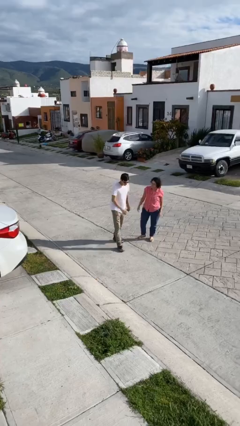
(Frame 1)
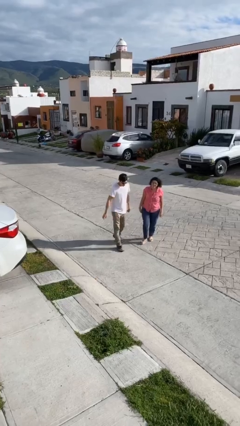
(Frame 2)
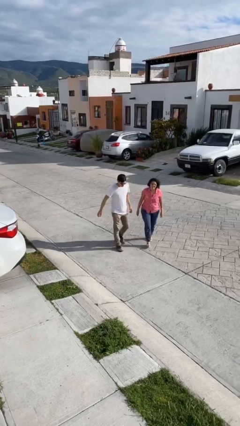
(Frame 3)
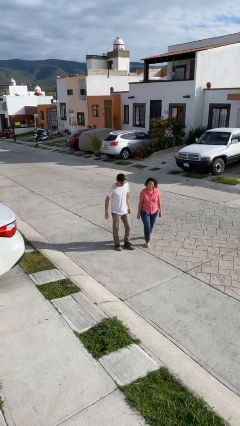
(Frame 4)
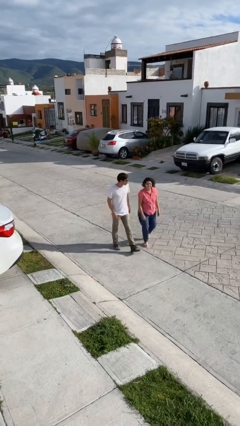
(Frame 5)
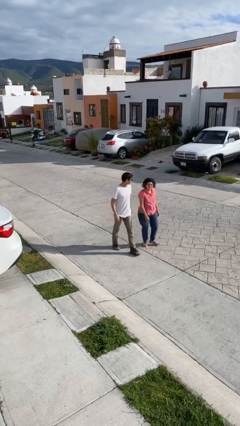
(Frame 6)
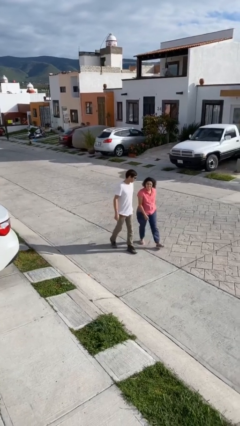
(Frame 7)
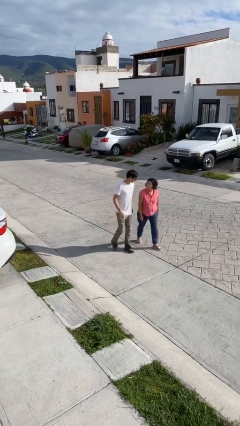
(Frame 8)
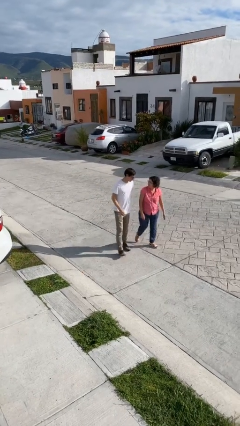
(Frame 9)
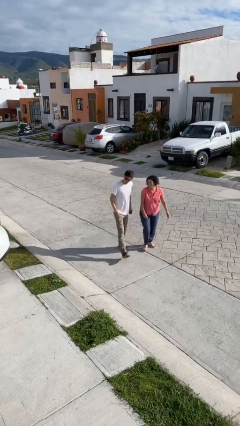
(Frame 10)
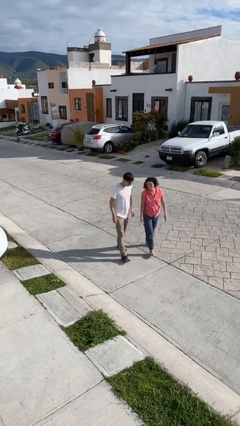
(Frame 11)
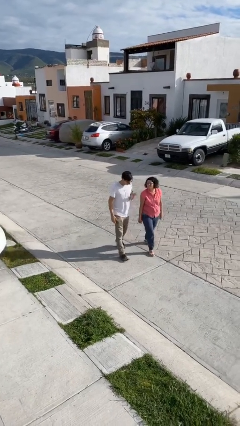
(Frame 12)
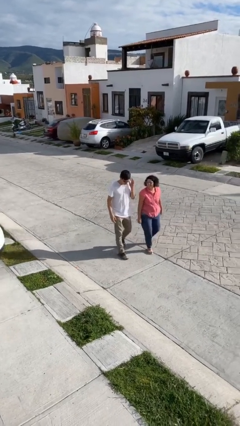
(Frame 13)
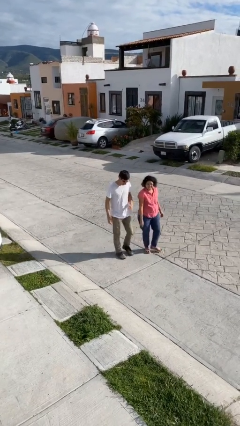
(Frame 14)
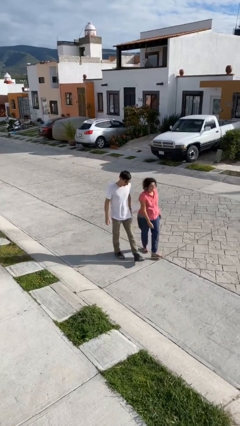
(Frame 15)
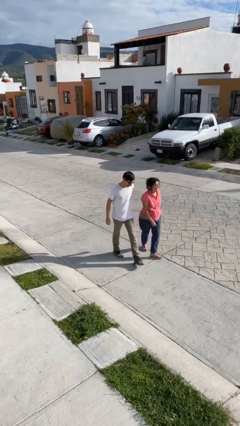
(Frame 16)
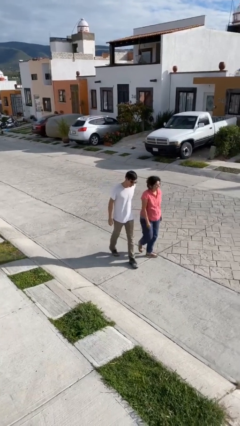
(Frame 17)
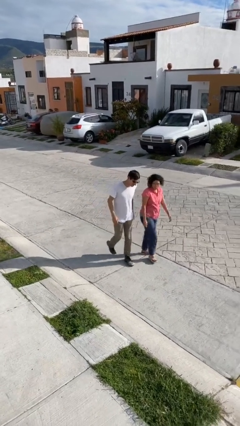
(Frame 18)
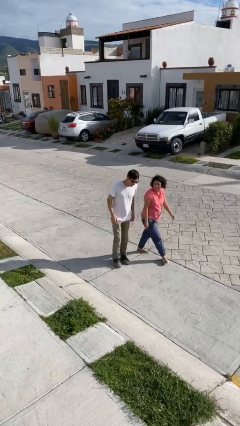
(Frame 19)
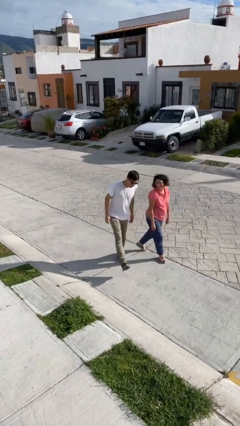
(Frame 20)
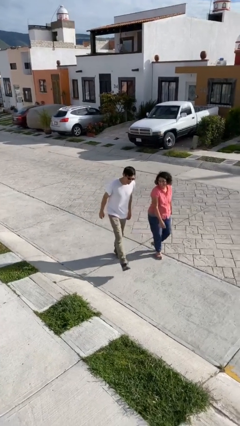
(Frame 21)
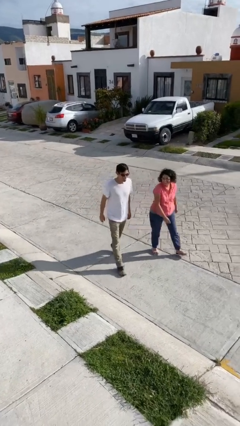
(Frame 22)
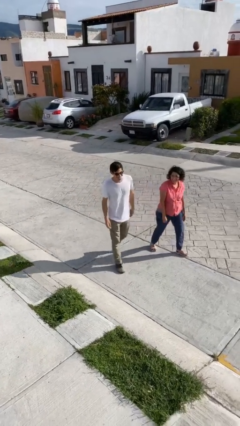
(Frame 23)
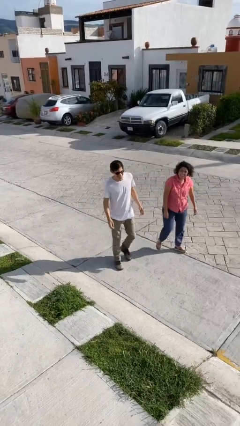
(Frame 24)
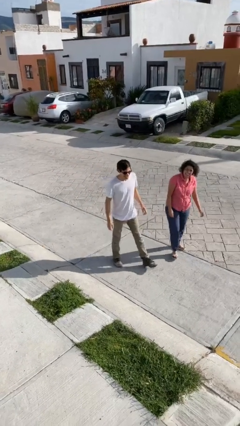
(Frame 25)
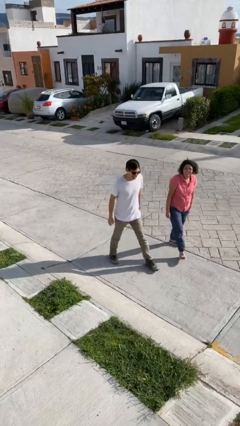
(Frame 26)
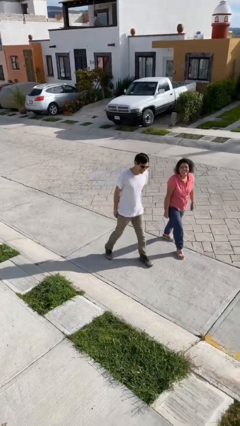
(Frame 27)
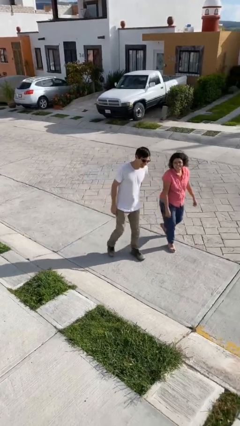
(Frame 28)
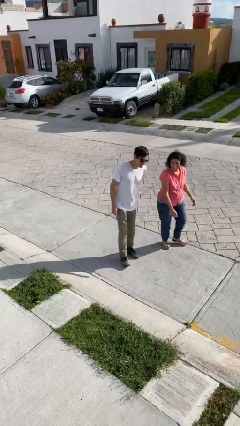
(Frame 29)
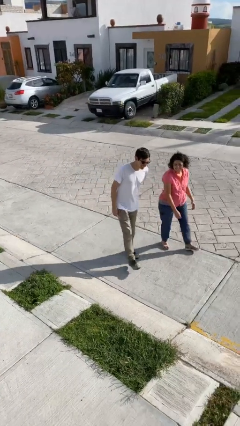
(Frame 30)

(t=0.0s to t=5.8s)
person talks to person

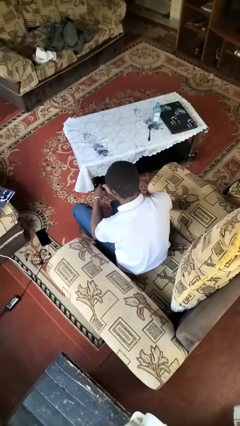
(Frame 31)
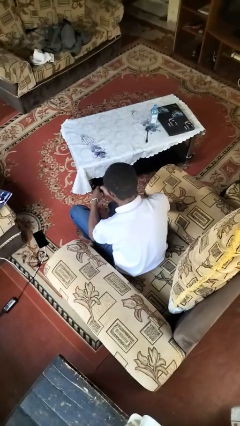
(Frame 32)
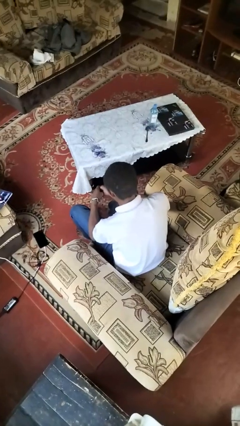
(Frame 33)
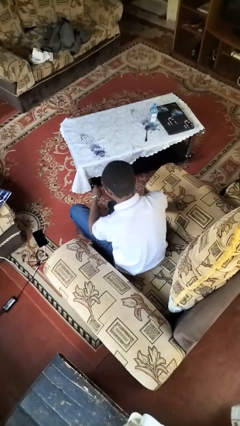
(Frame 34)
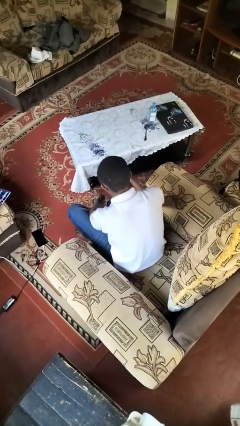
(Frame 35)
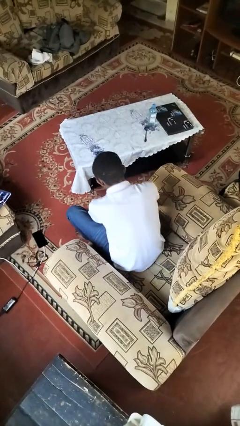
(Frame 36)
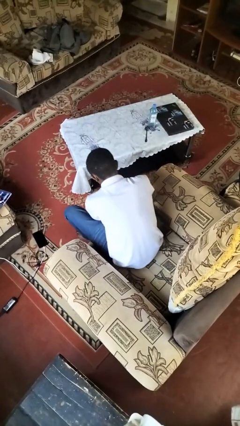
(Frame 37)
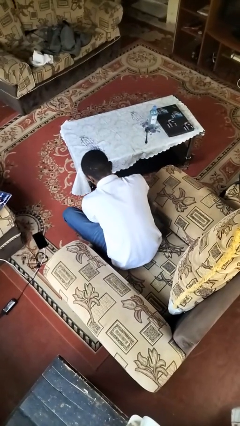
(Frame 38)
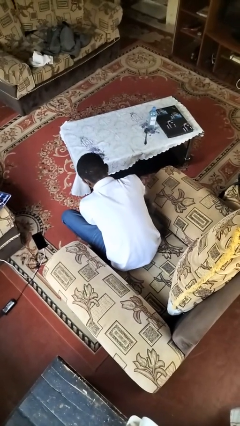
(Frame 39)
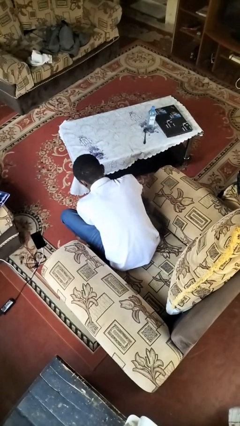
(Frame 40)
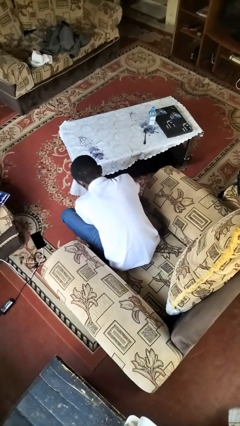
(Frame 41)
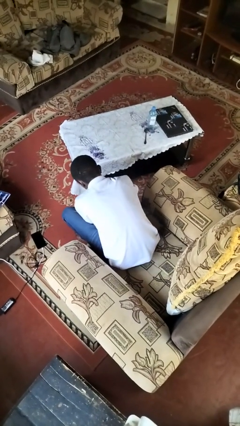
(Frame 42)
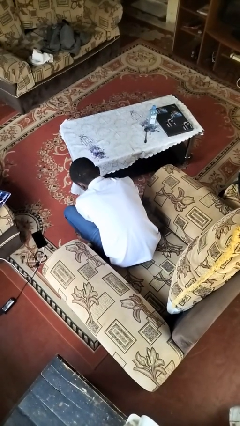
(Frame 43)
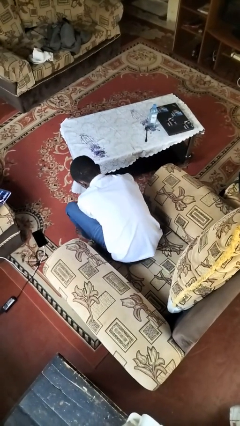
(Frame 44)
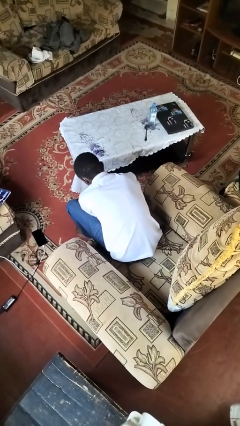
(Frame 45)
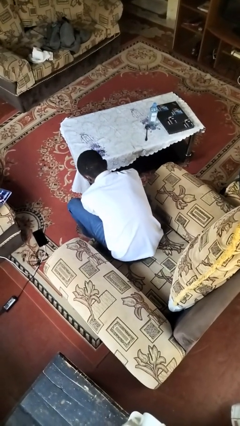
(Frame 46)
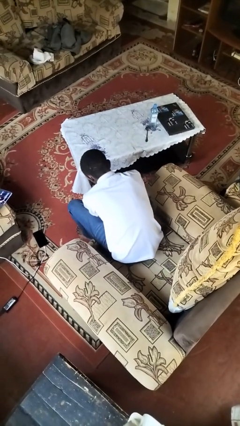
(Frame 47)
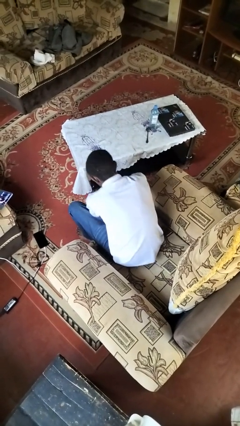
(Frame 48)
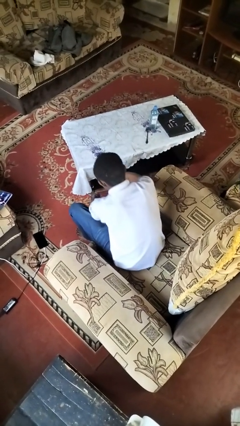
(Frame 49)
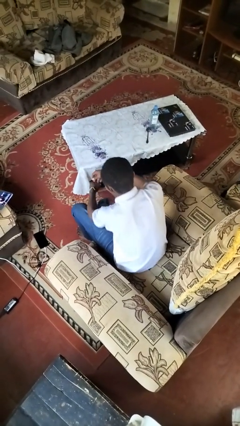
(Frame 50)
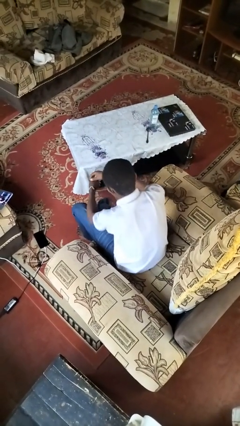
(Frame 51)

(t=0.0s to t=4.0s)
person takes off socks

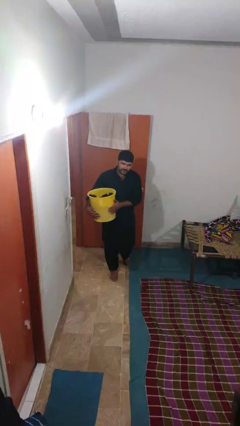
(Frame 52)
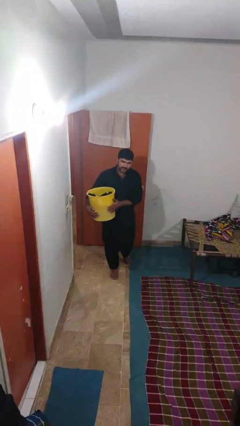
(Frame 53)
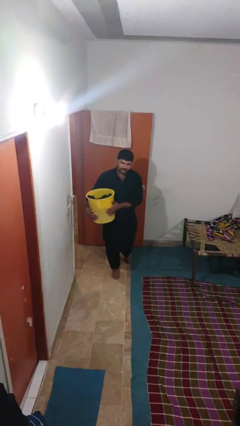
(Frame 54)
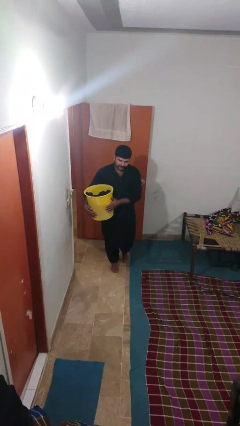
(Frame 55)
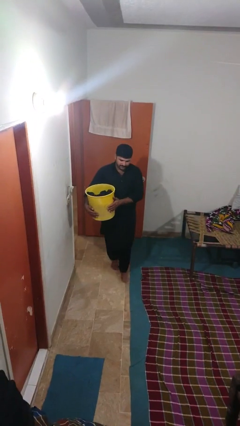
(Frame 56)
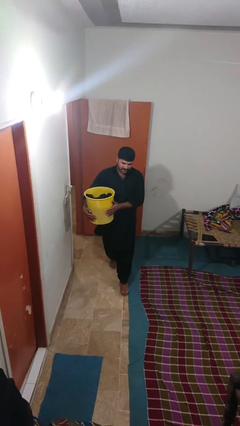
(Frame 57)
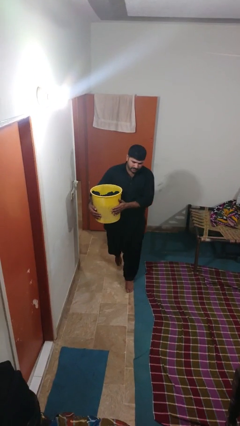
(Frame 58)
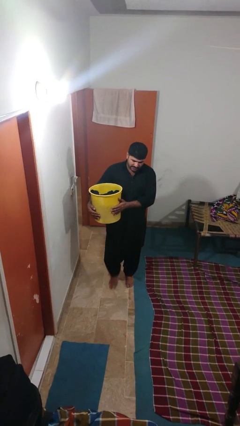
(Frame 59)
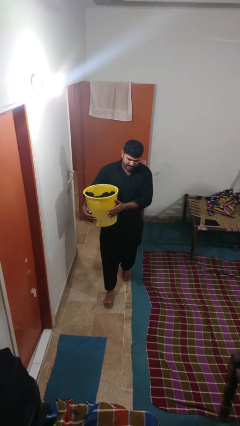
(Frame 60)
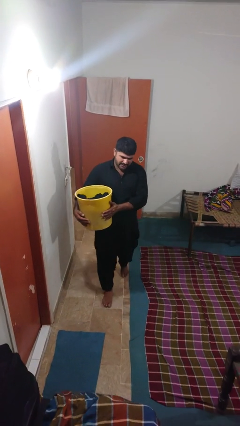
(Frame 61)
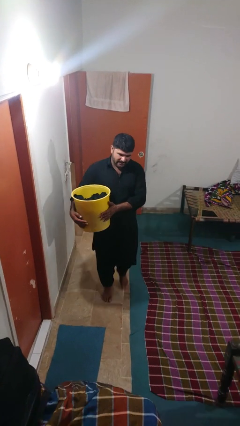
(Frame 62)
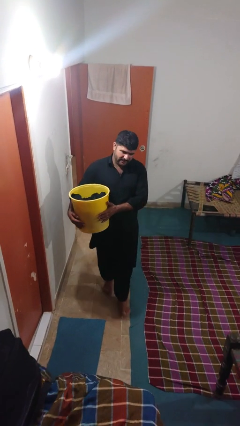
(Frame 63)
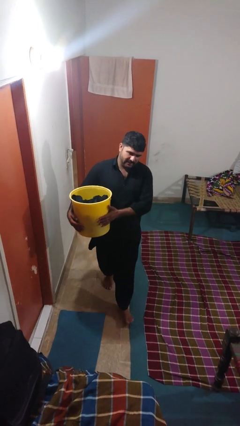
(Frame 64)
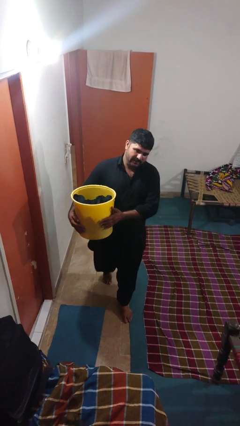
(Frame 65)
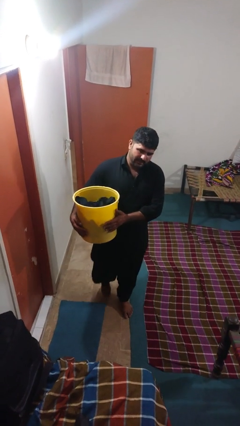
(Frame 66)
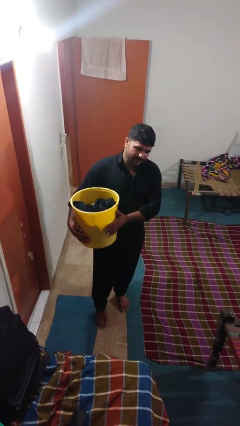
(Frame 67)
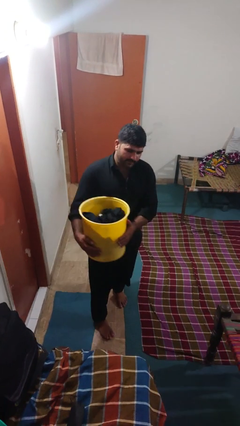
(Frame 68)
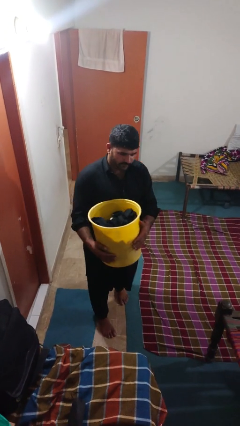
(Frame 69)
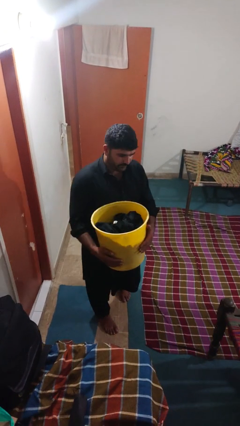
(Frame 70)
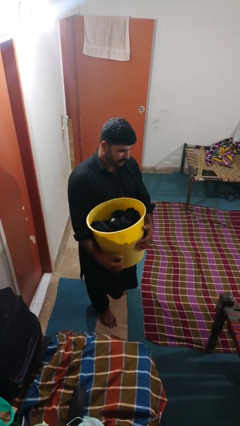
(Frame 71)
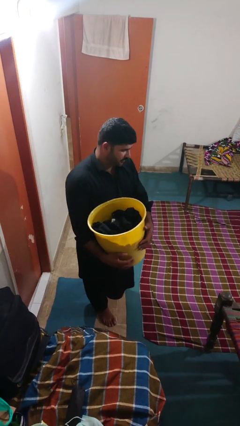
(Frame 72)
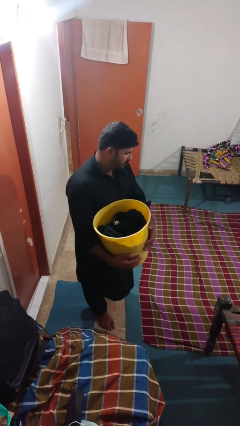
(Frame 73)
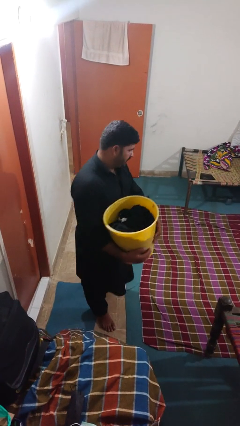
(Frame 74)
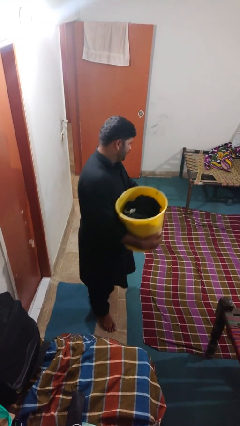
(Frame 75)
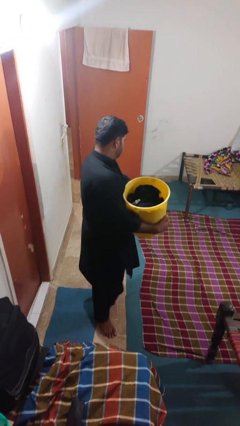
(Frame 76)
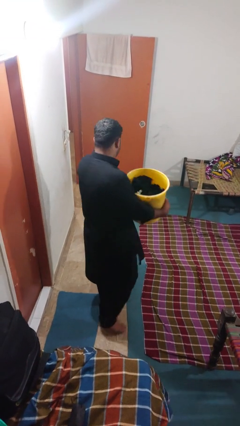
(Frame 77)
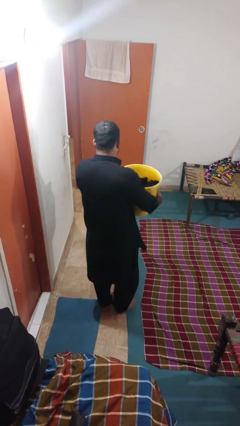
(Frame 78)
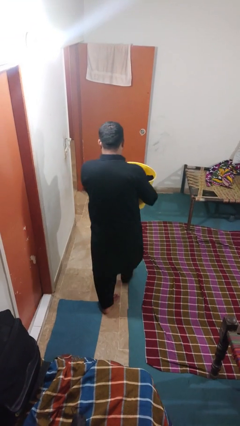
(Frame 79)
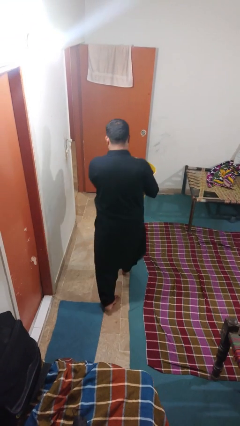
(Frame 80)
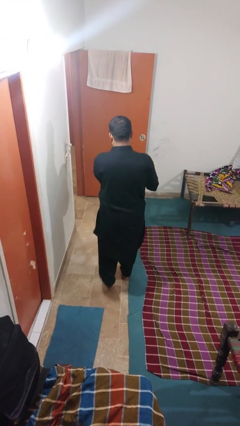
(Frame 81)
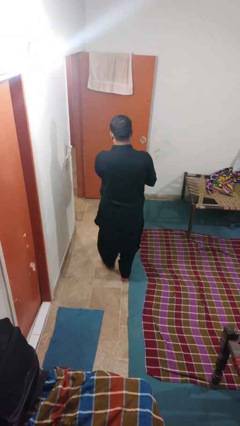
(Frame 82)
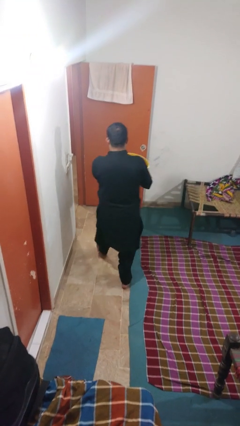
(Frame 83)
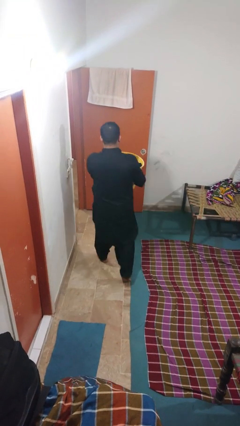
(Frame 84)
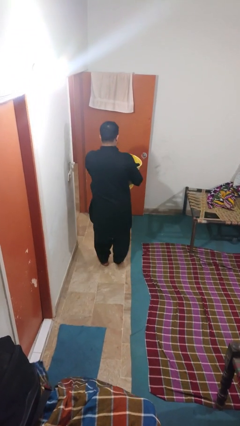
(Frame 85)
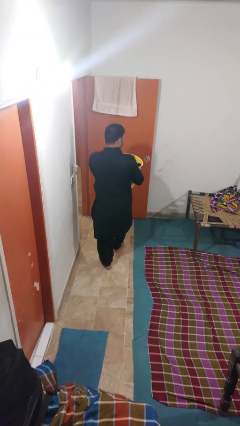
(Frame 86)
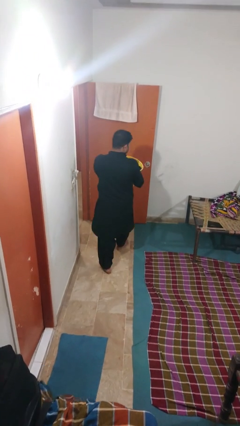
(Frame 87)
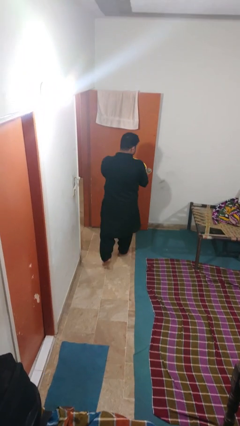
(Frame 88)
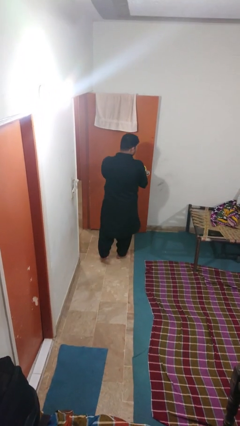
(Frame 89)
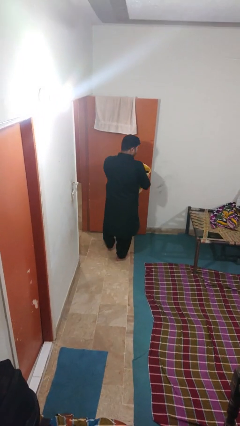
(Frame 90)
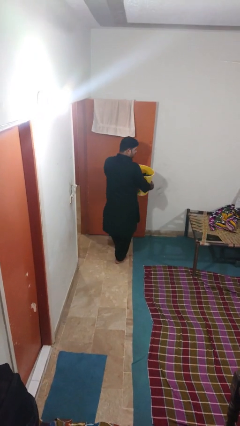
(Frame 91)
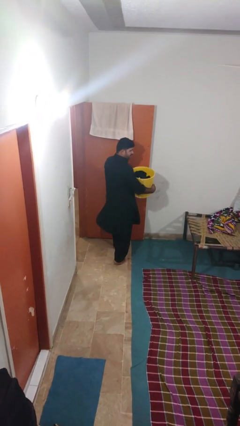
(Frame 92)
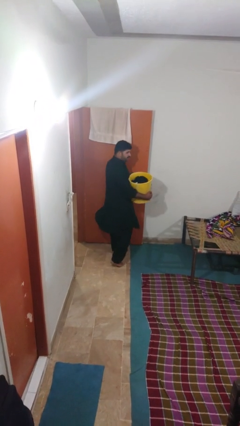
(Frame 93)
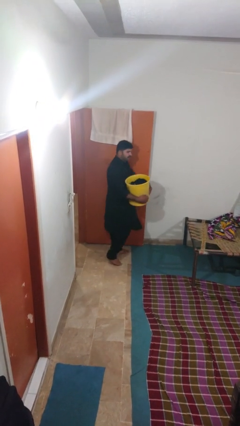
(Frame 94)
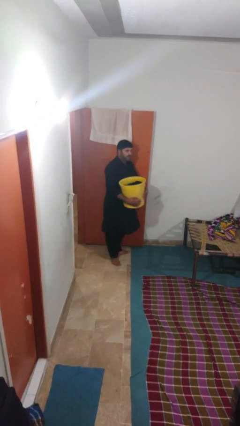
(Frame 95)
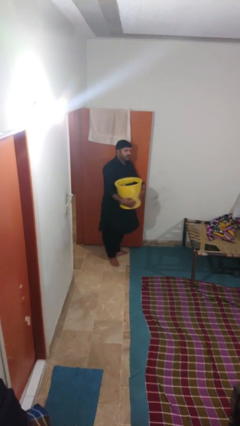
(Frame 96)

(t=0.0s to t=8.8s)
person carries laundry basket
